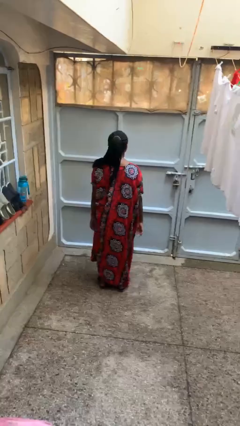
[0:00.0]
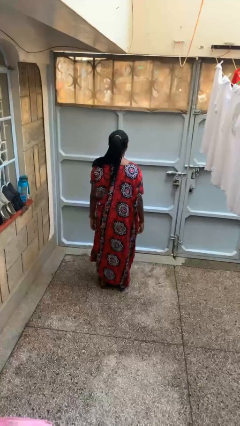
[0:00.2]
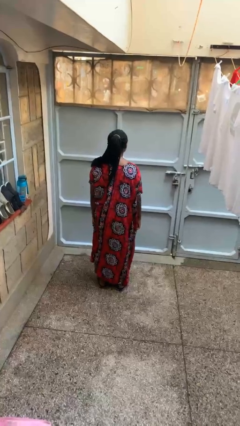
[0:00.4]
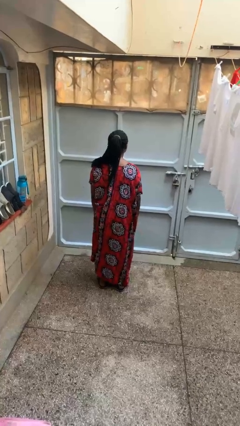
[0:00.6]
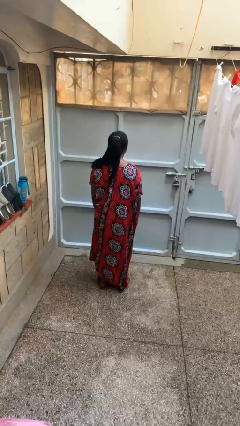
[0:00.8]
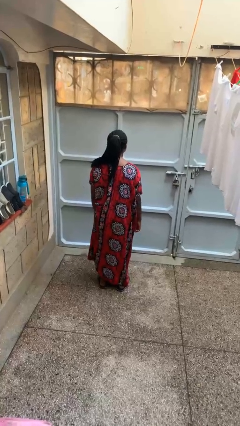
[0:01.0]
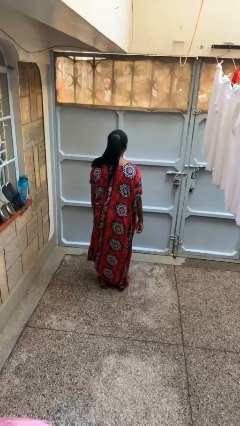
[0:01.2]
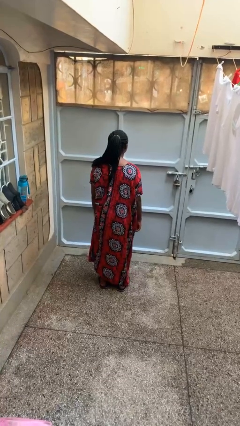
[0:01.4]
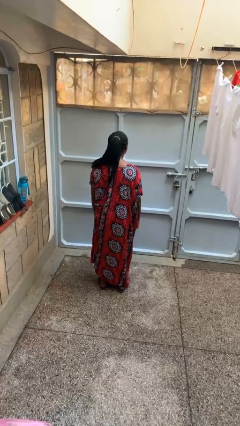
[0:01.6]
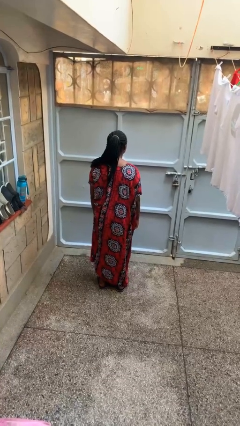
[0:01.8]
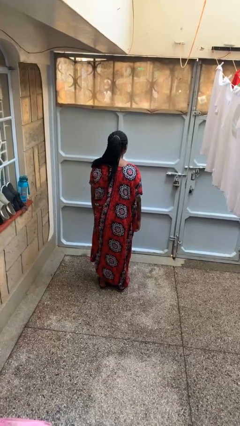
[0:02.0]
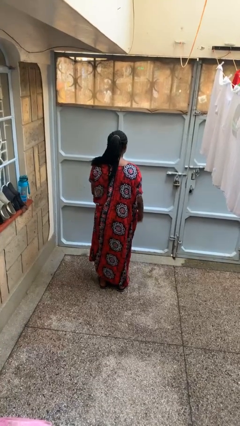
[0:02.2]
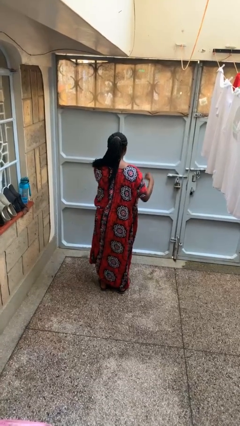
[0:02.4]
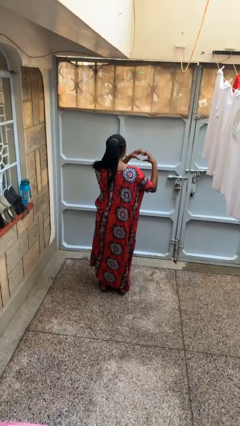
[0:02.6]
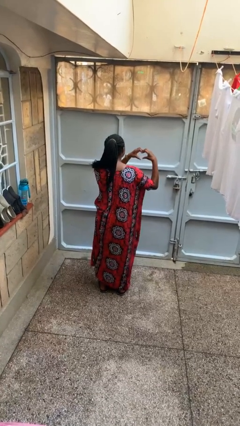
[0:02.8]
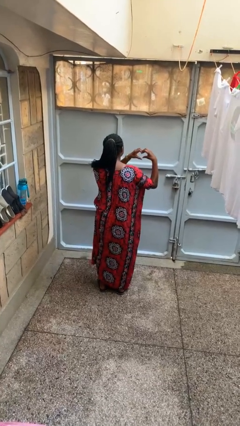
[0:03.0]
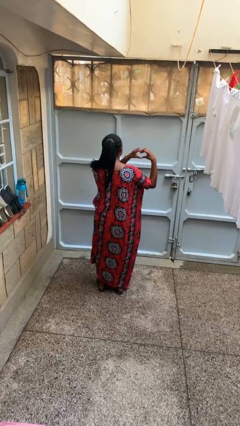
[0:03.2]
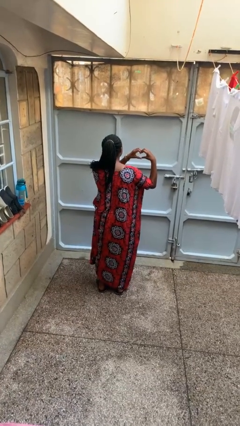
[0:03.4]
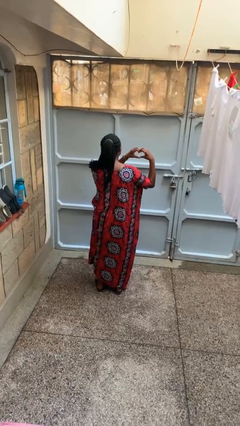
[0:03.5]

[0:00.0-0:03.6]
person gestures heart

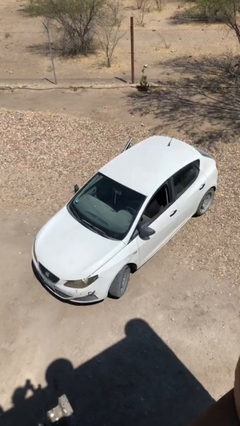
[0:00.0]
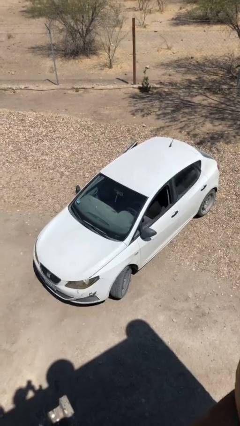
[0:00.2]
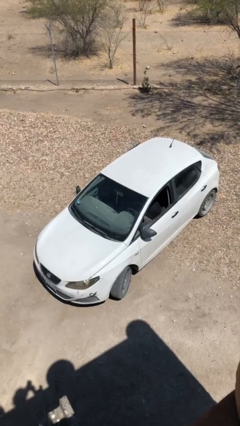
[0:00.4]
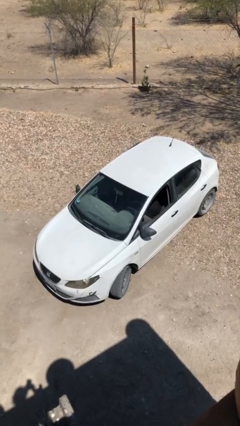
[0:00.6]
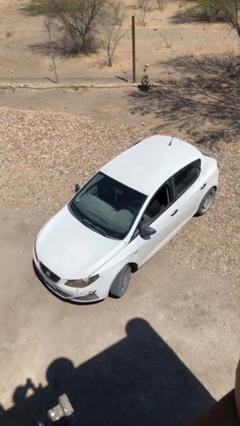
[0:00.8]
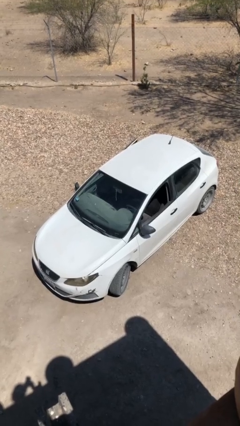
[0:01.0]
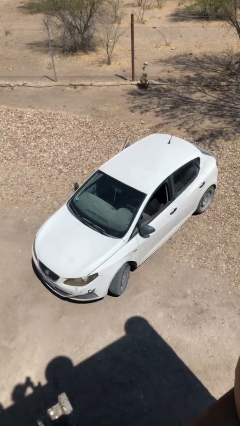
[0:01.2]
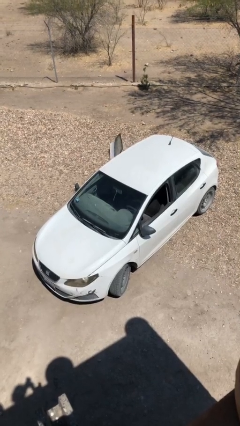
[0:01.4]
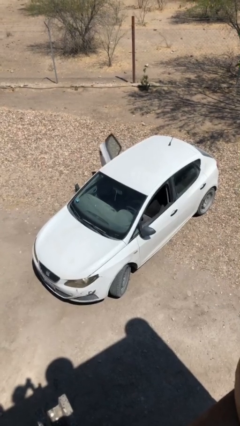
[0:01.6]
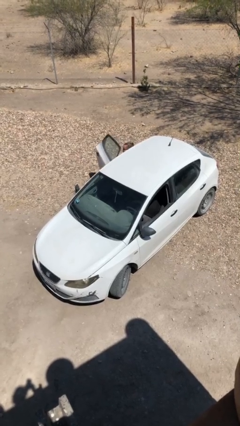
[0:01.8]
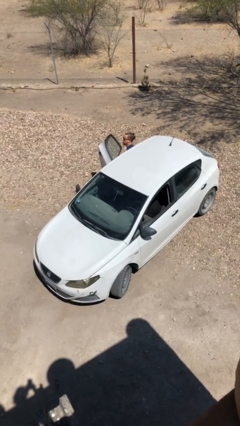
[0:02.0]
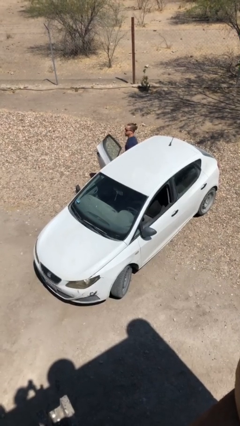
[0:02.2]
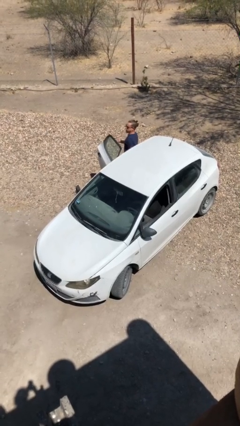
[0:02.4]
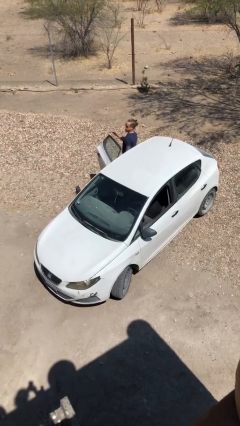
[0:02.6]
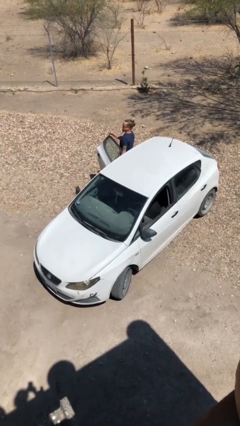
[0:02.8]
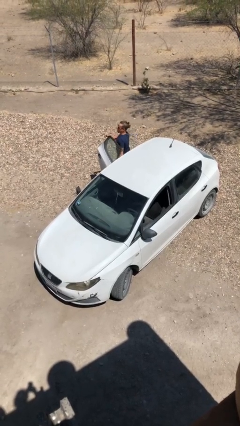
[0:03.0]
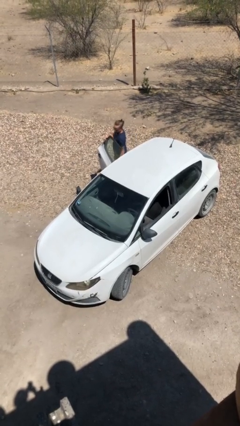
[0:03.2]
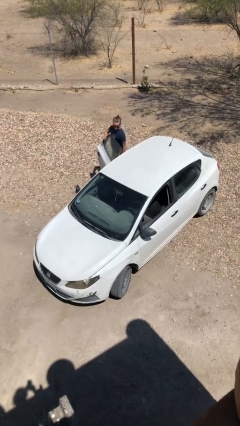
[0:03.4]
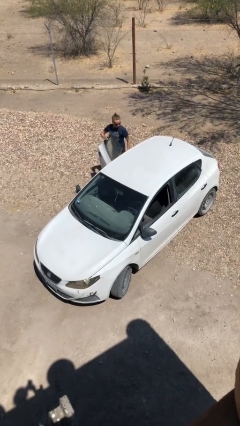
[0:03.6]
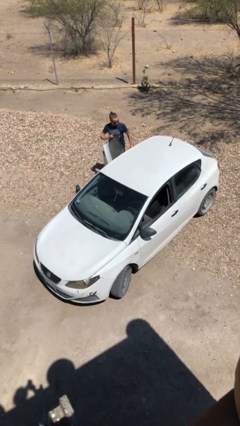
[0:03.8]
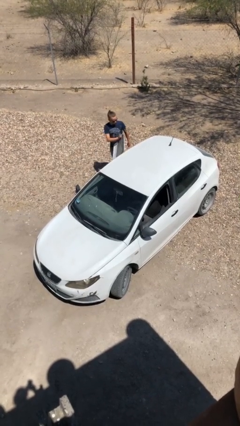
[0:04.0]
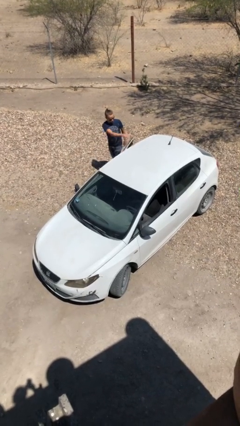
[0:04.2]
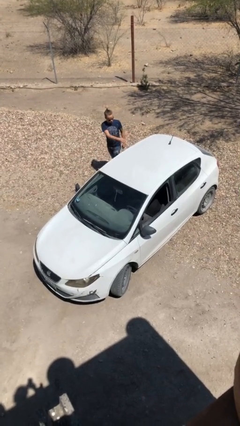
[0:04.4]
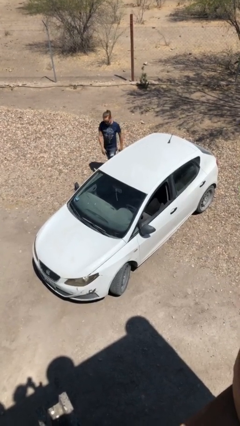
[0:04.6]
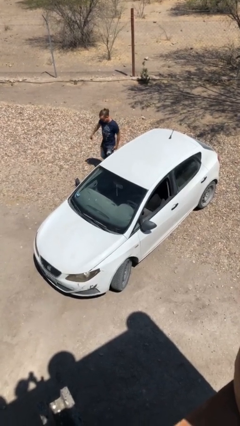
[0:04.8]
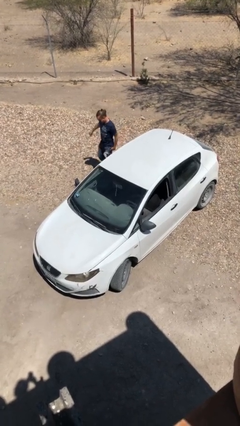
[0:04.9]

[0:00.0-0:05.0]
car drops off person

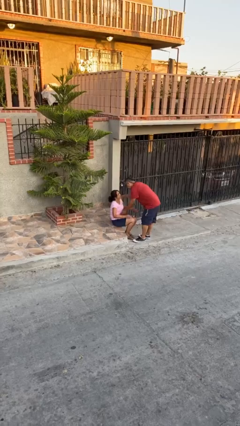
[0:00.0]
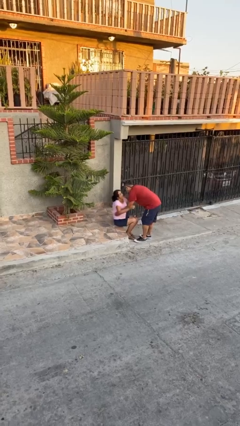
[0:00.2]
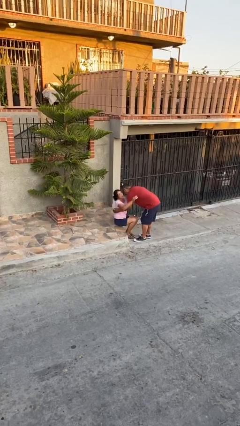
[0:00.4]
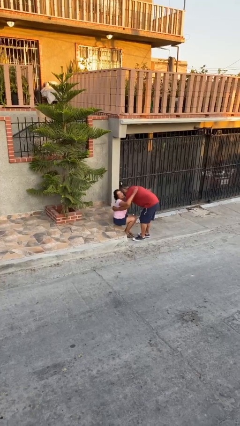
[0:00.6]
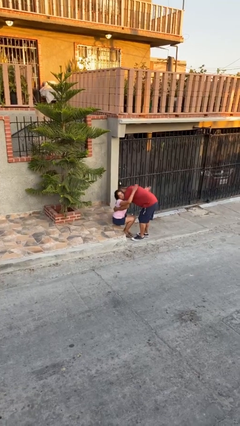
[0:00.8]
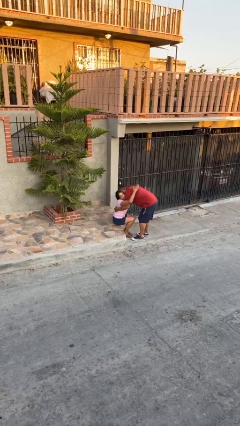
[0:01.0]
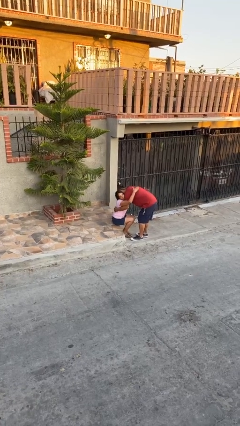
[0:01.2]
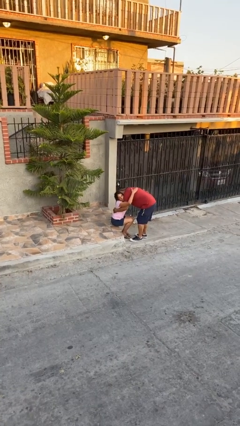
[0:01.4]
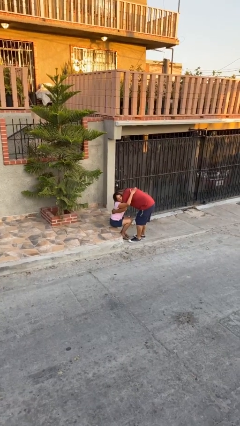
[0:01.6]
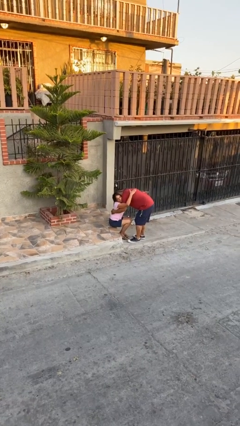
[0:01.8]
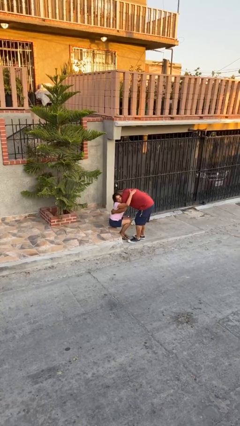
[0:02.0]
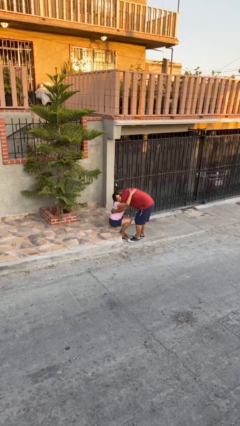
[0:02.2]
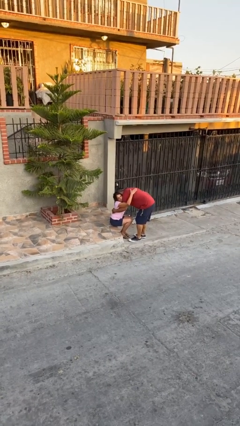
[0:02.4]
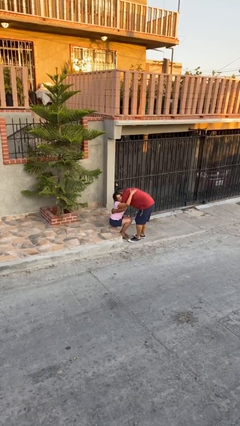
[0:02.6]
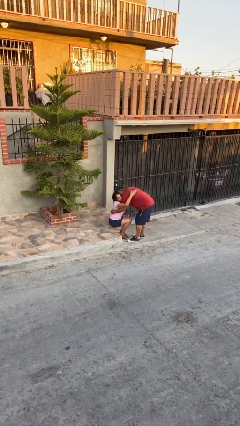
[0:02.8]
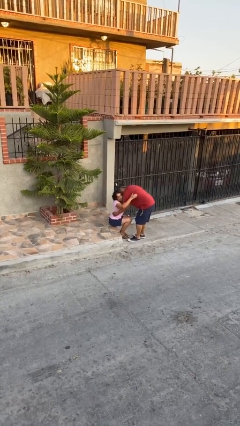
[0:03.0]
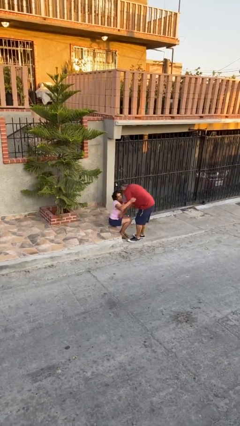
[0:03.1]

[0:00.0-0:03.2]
person embraces person

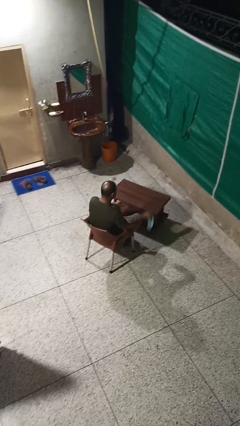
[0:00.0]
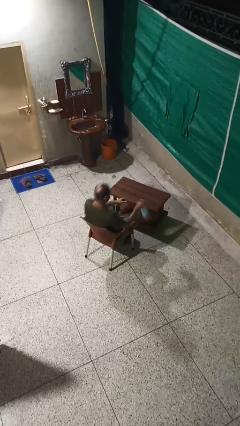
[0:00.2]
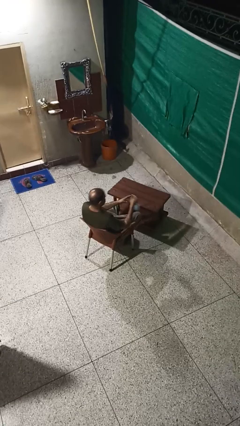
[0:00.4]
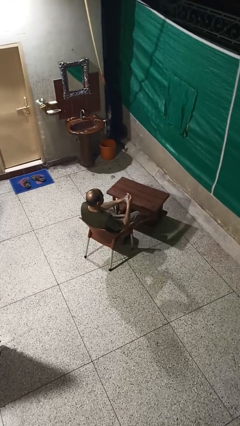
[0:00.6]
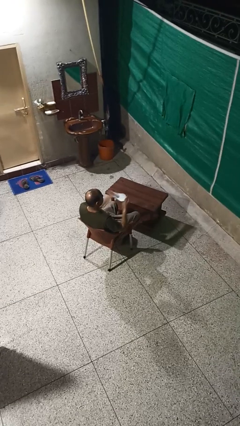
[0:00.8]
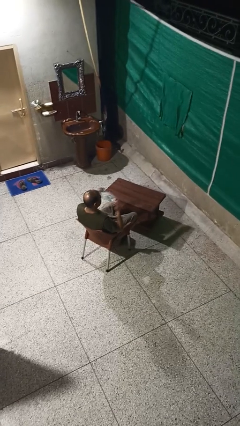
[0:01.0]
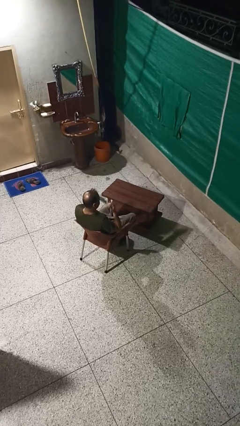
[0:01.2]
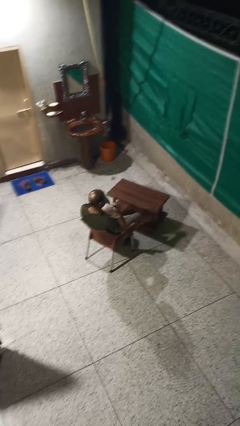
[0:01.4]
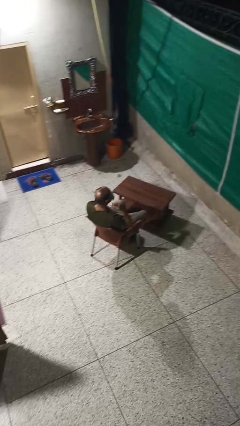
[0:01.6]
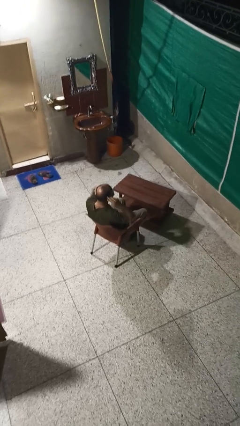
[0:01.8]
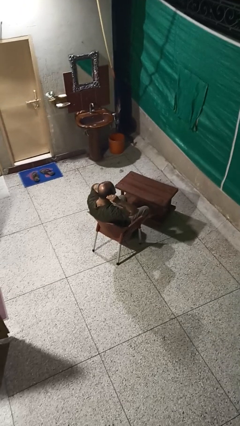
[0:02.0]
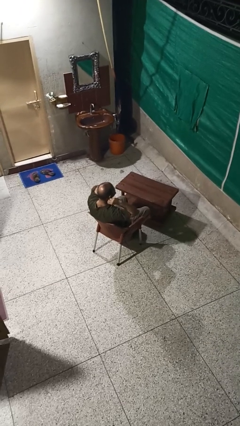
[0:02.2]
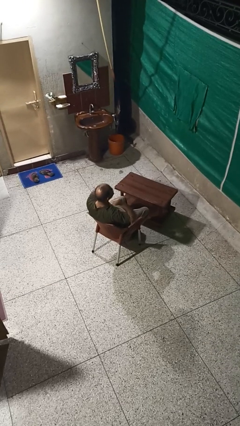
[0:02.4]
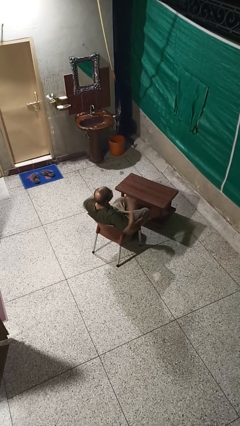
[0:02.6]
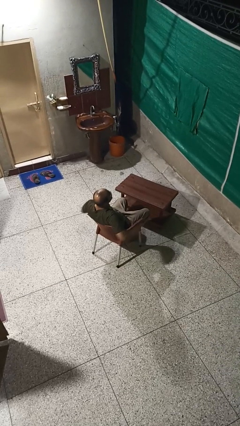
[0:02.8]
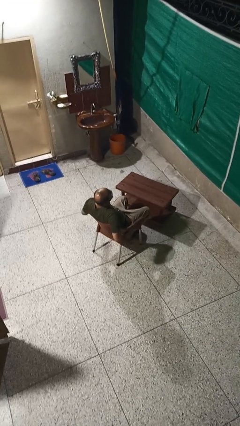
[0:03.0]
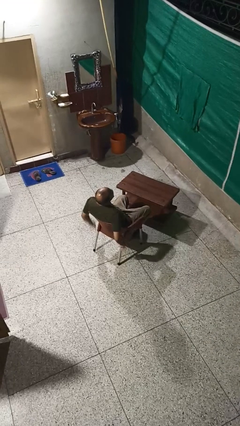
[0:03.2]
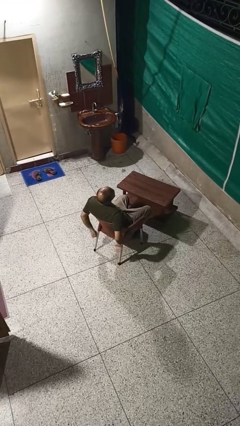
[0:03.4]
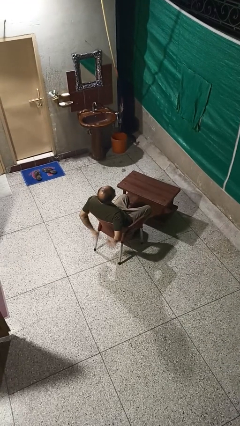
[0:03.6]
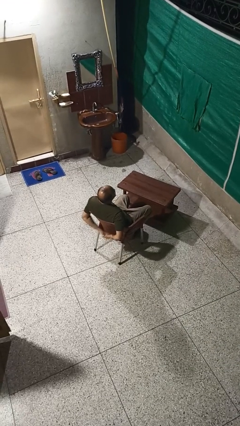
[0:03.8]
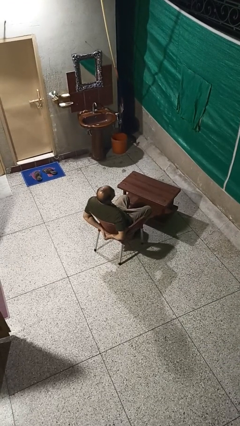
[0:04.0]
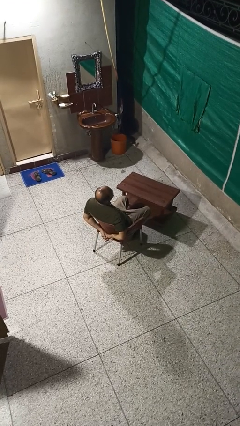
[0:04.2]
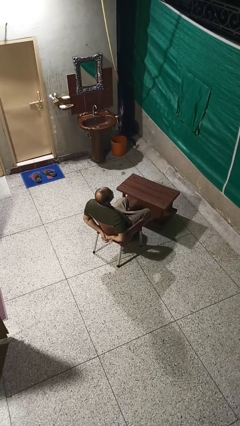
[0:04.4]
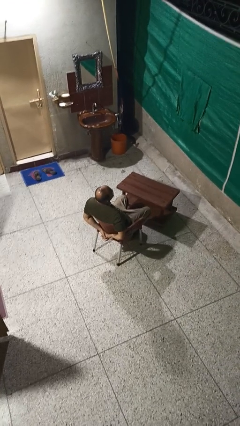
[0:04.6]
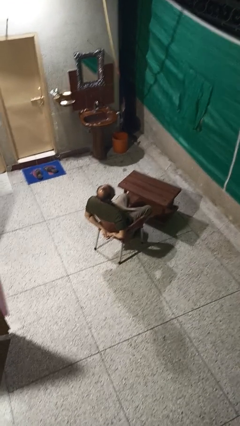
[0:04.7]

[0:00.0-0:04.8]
person puts on facemask

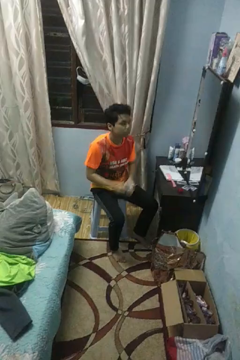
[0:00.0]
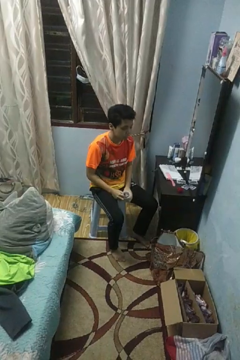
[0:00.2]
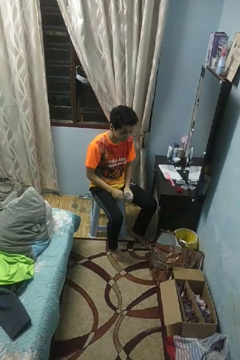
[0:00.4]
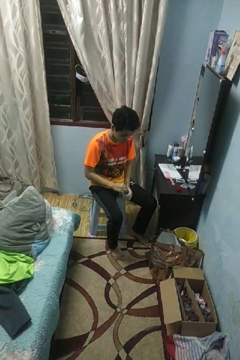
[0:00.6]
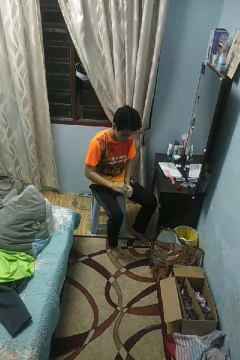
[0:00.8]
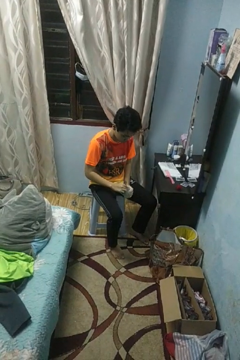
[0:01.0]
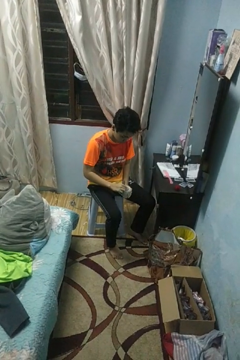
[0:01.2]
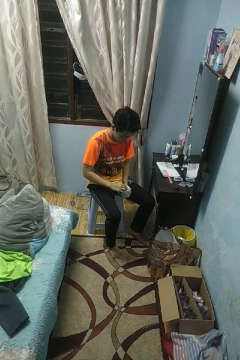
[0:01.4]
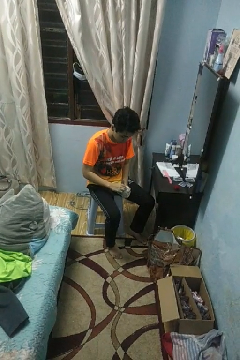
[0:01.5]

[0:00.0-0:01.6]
person stirs mug
